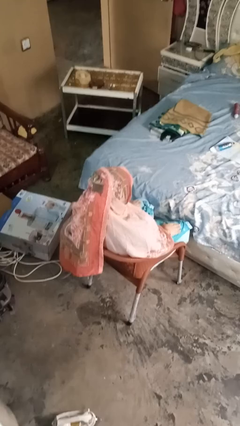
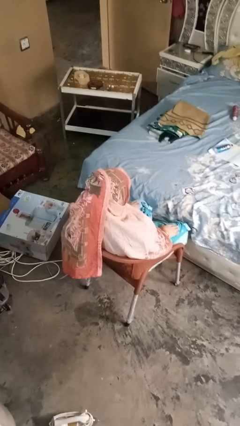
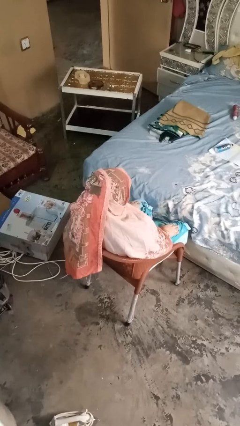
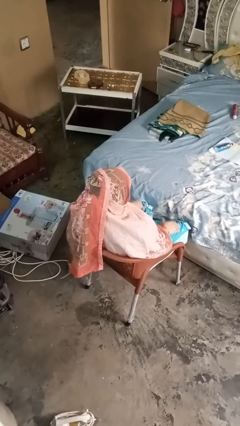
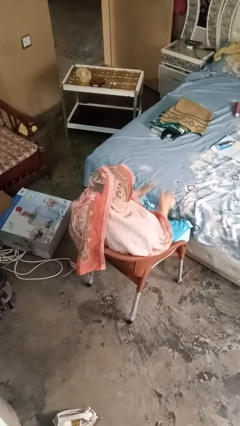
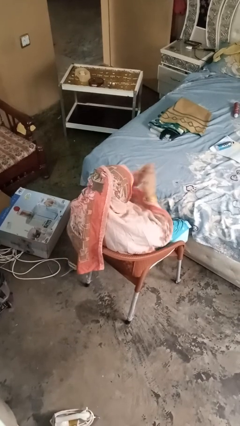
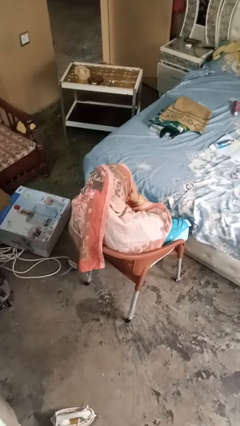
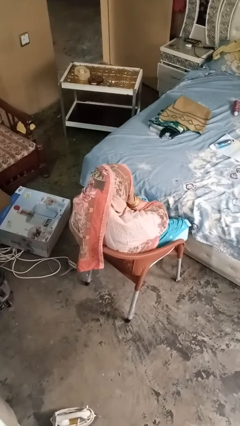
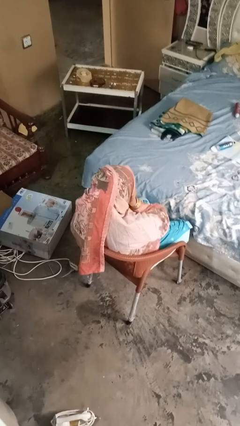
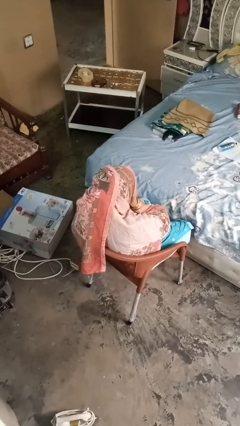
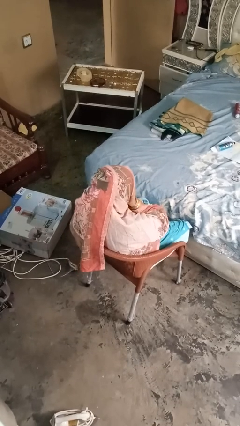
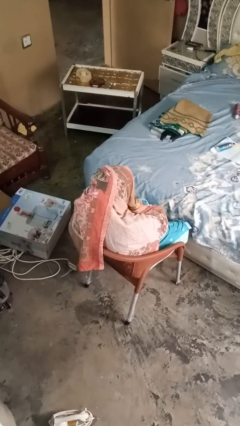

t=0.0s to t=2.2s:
person covers face with hands

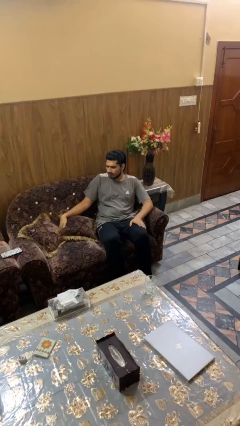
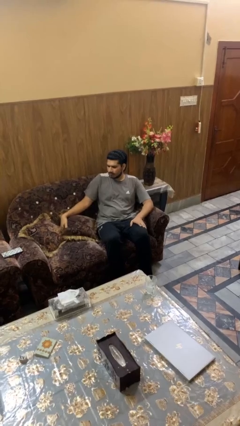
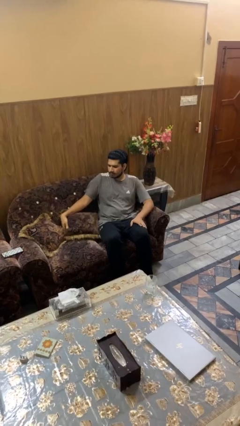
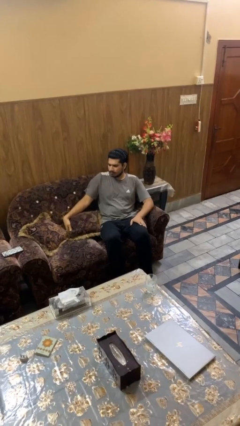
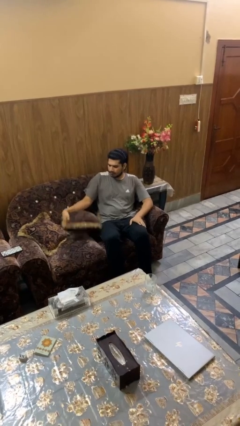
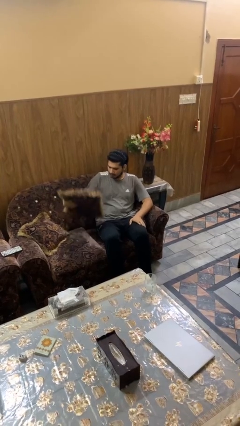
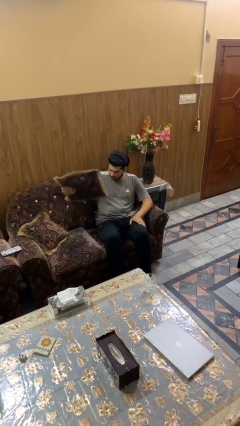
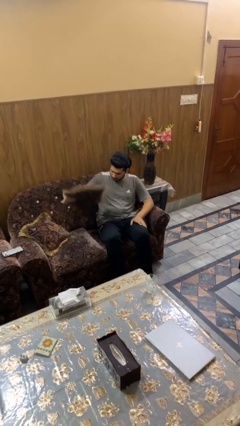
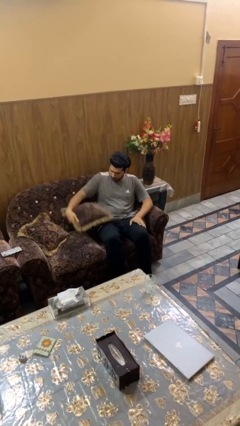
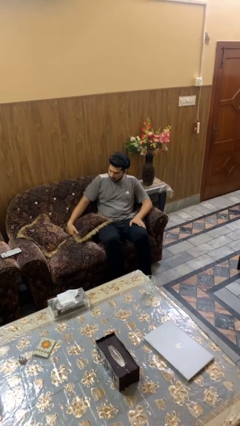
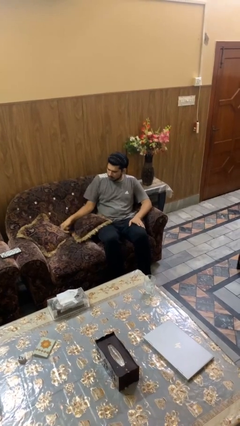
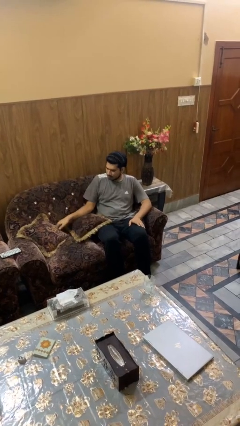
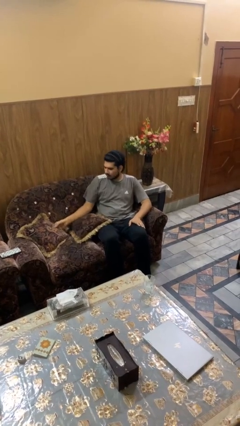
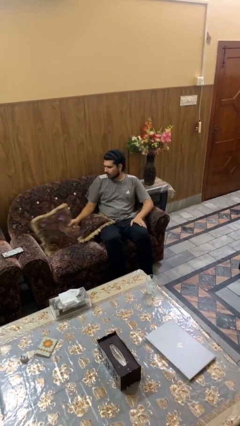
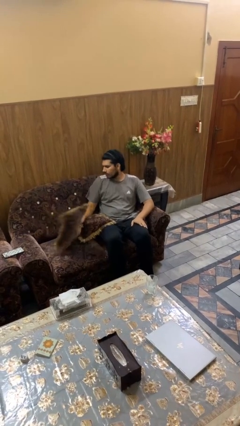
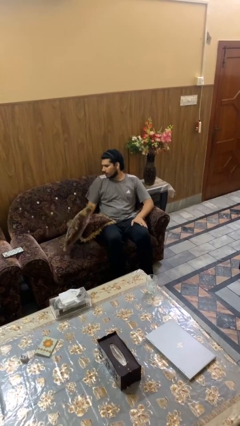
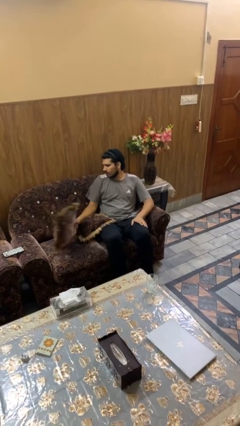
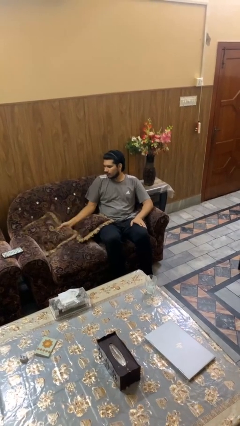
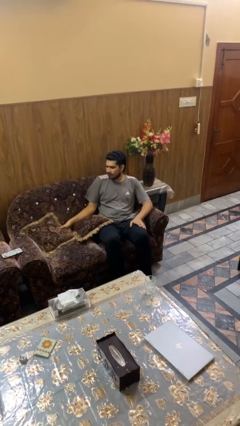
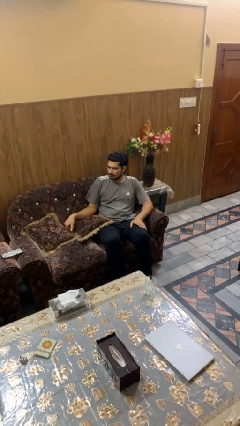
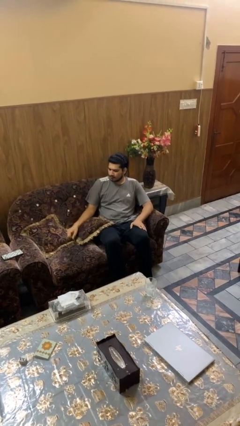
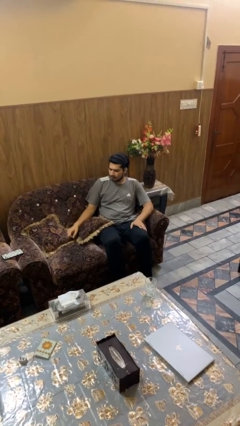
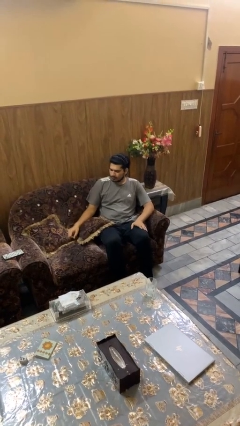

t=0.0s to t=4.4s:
person searches in couch

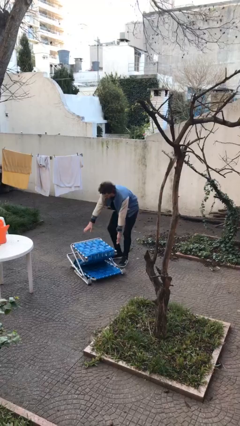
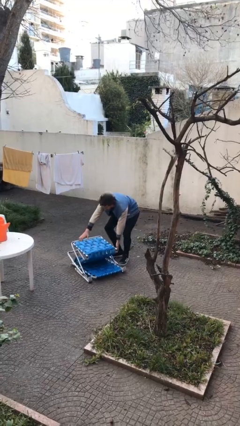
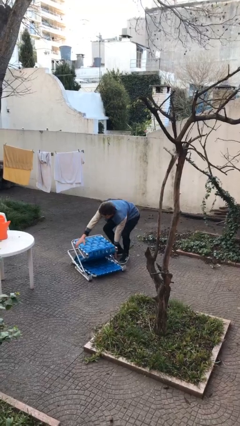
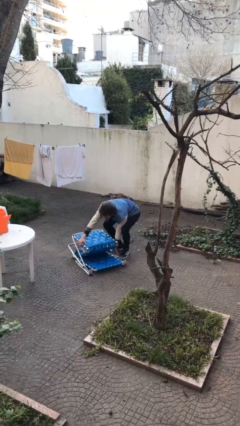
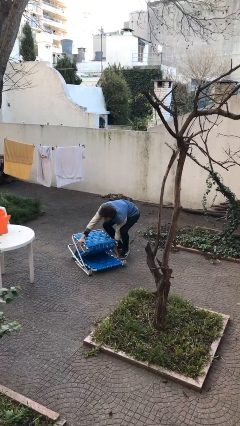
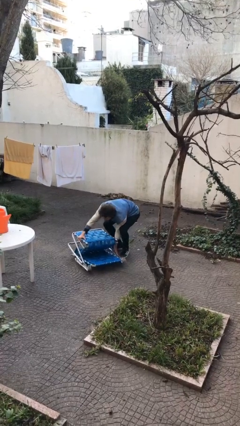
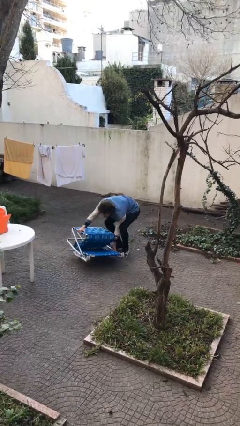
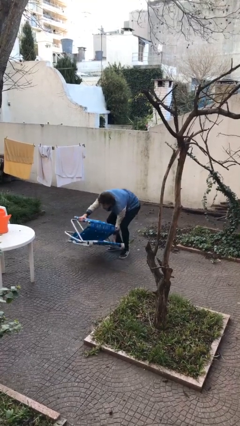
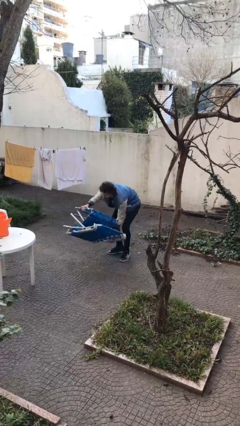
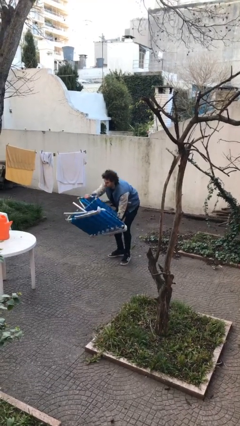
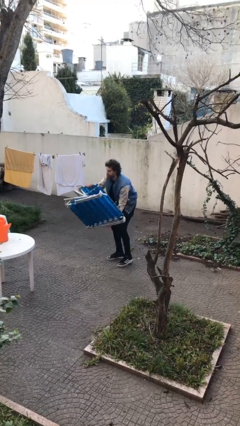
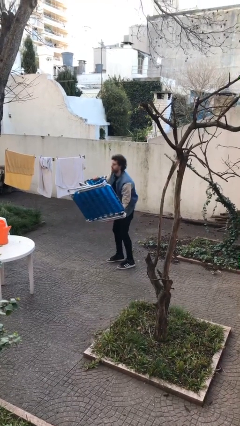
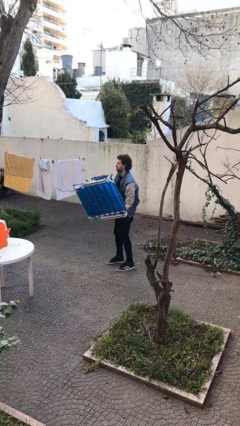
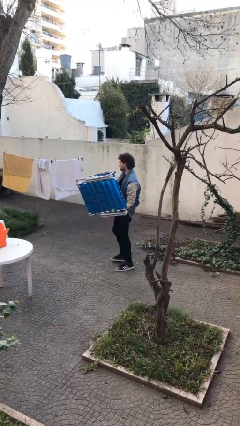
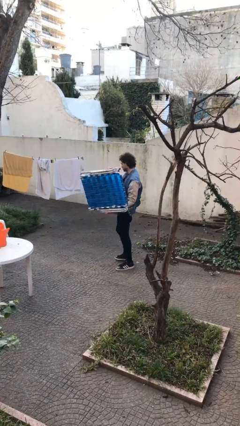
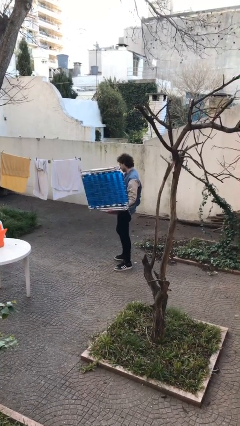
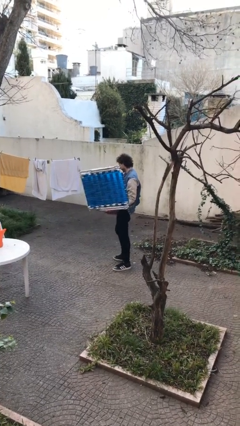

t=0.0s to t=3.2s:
person picks up object from floor

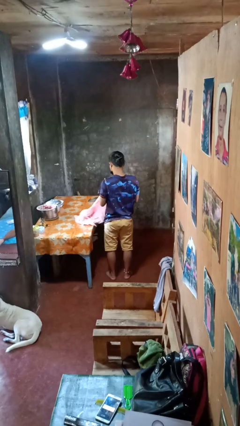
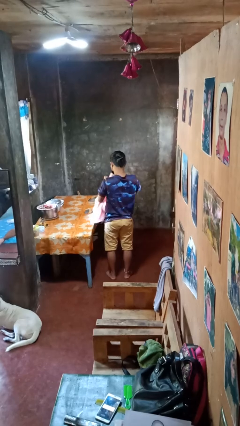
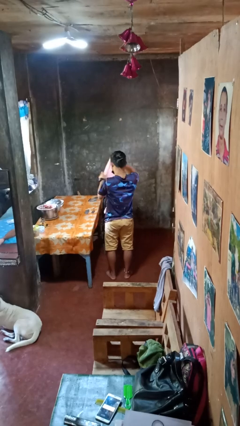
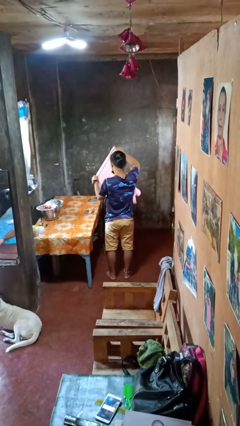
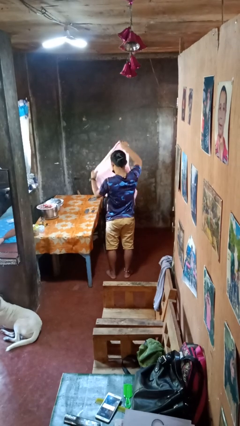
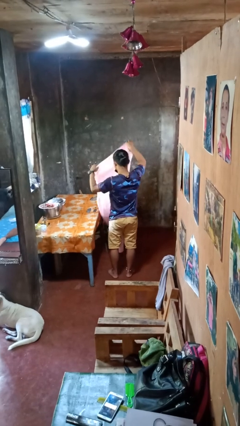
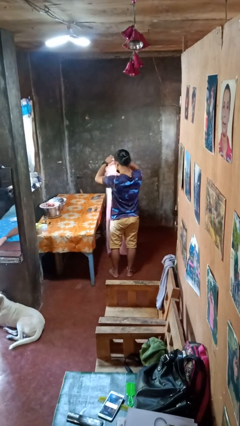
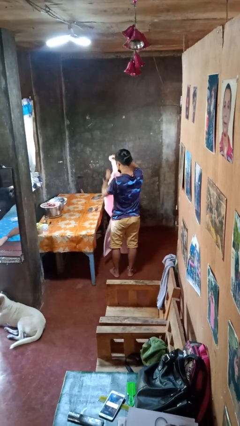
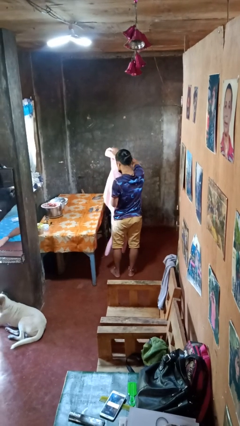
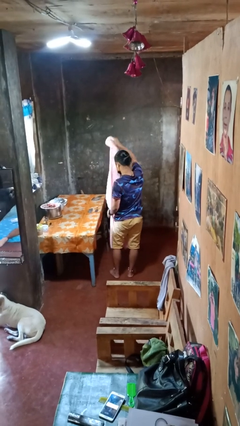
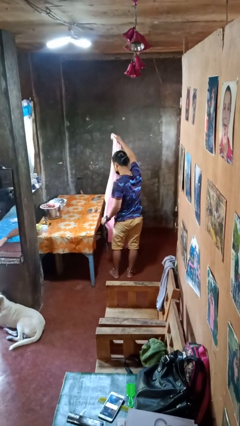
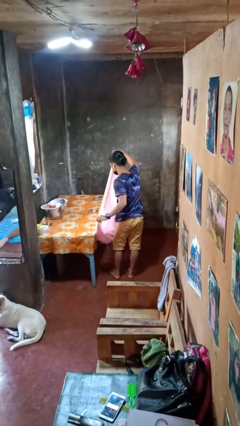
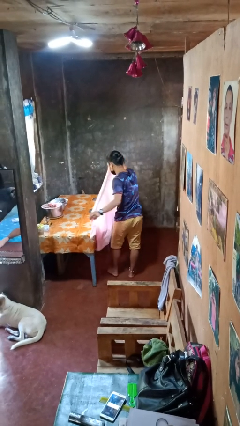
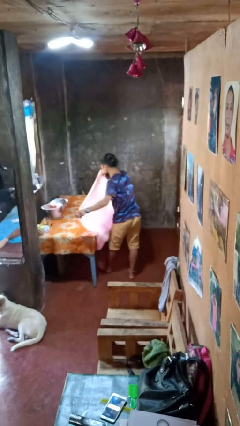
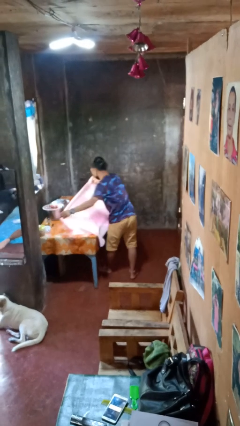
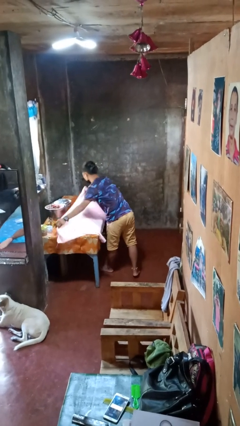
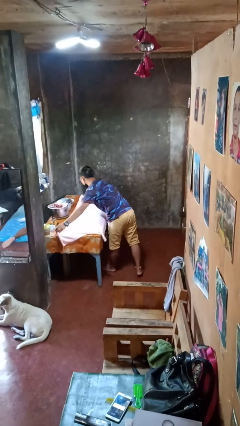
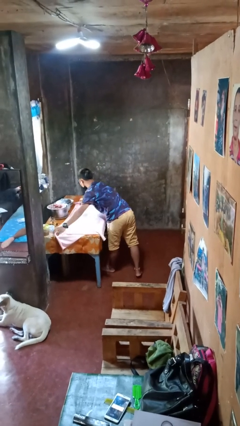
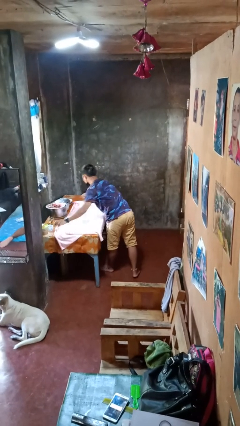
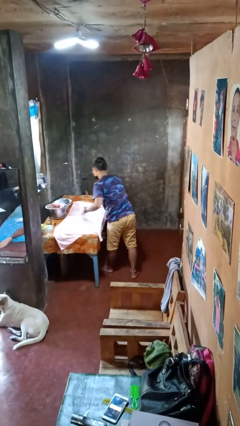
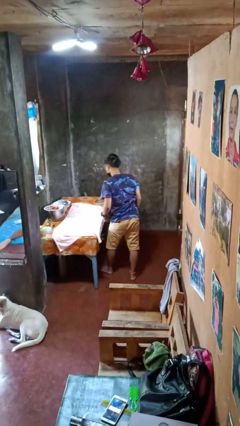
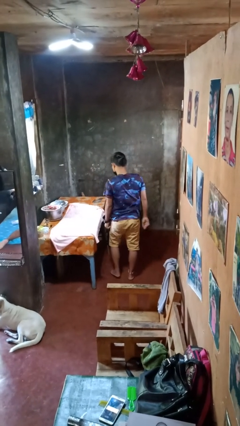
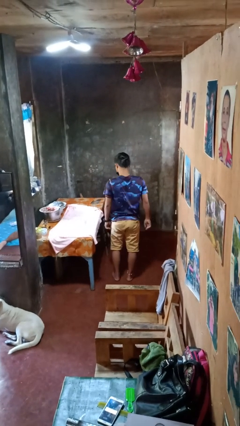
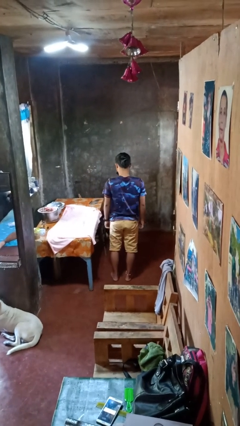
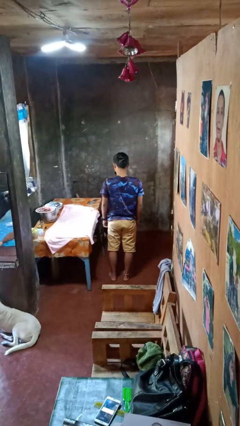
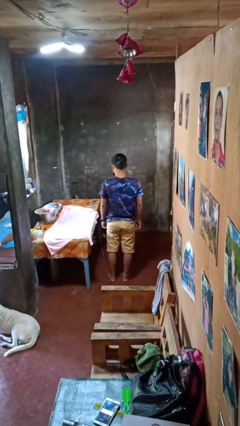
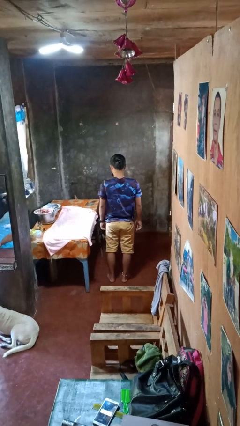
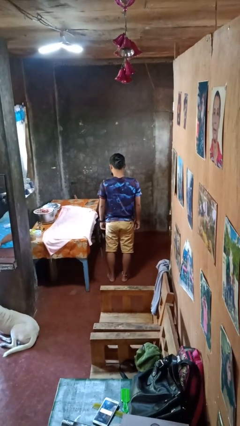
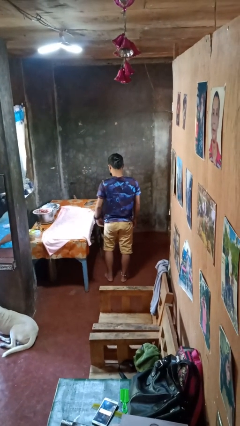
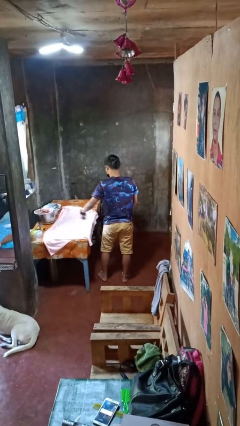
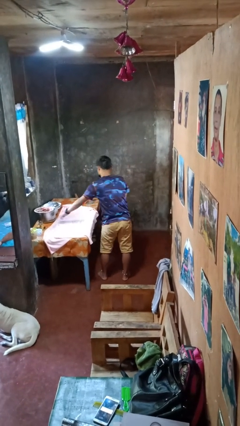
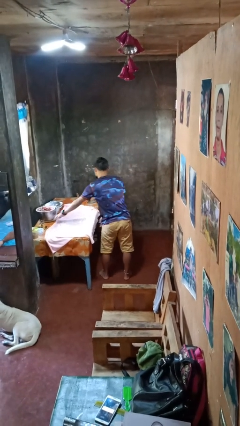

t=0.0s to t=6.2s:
person spreads tablecloth

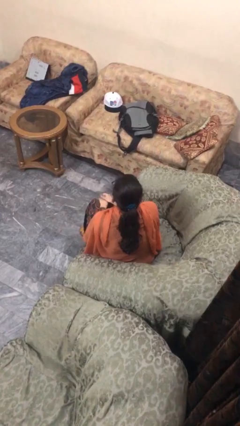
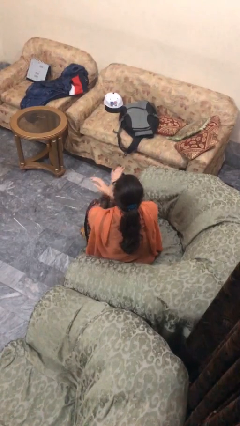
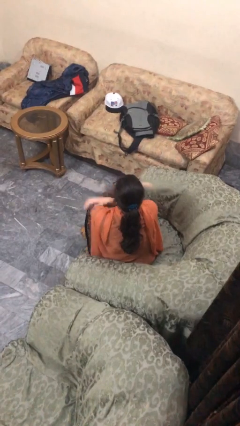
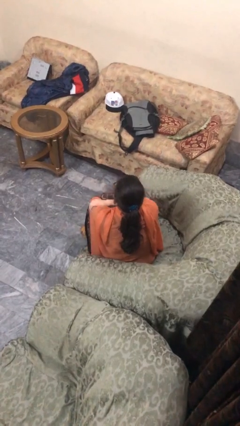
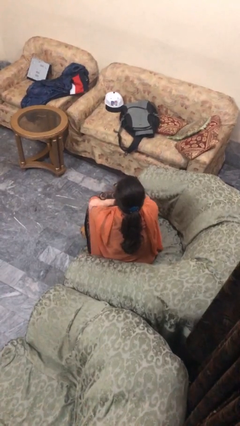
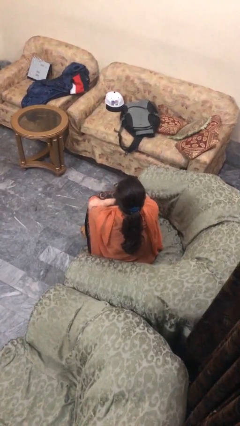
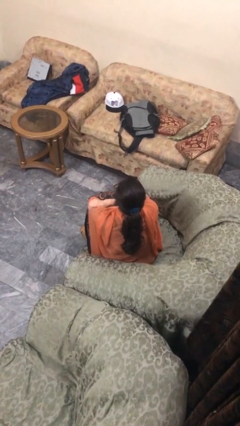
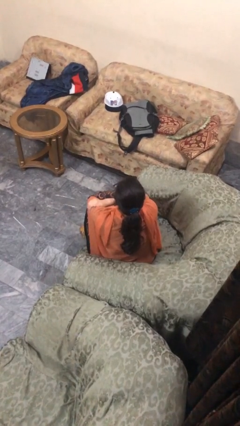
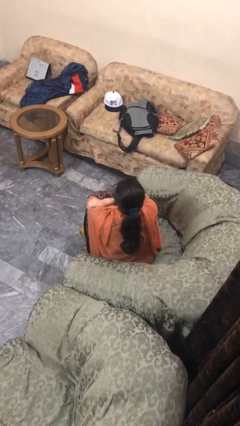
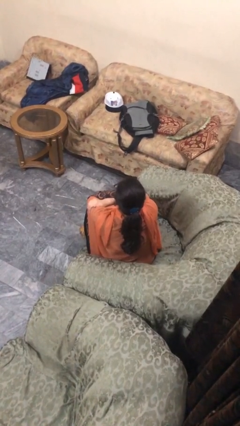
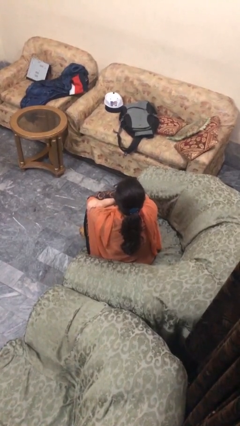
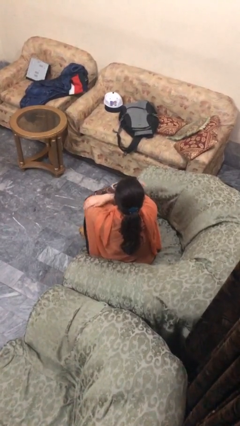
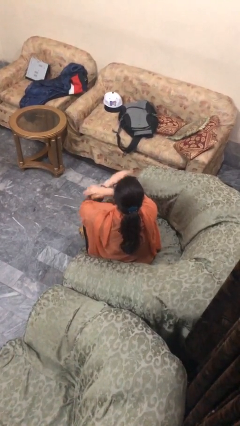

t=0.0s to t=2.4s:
person crosses arms
